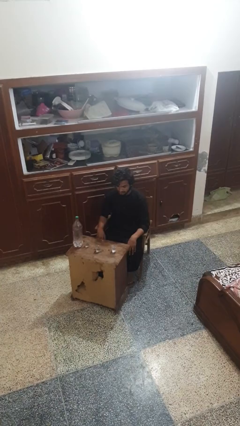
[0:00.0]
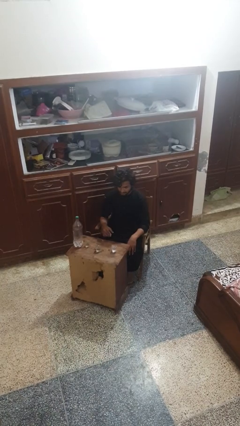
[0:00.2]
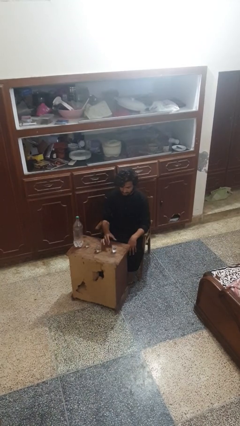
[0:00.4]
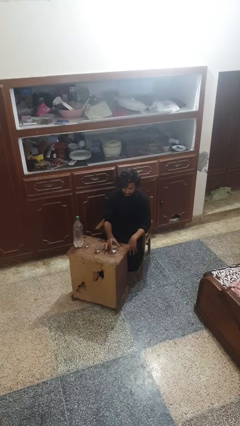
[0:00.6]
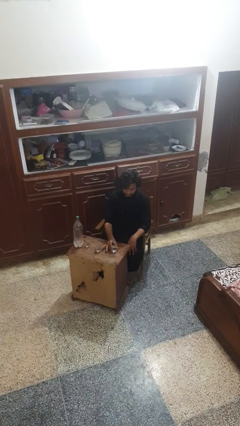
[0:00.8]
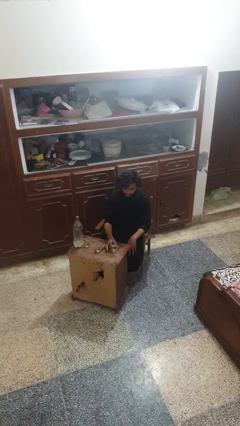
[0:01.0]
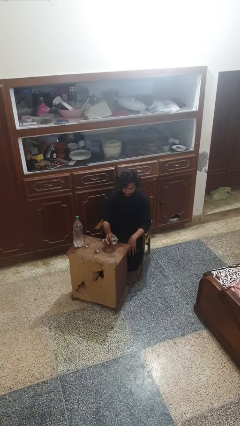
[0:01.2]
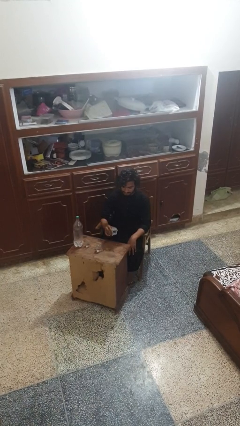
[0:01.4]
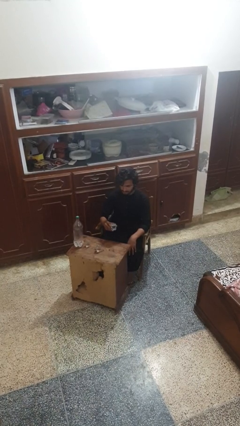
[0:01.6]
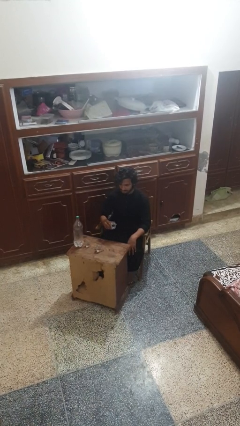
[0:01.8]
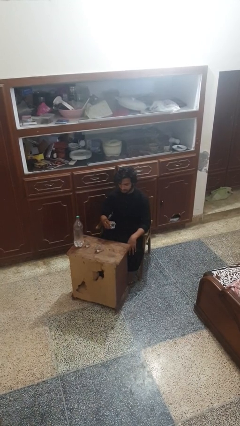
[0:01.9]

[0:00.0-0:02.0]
person picks up object from table

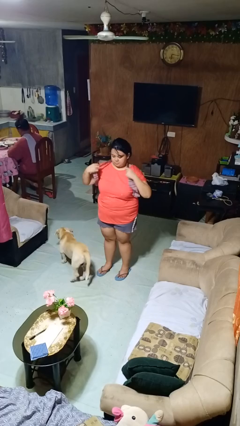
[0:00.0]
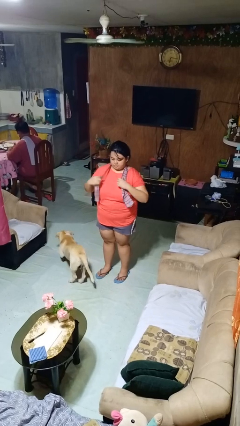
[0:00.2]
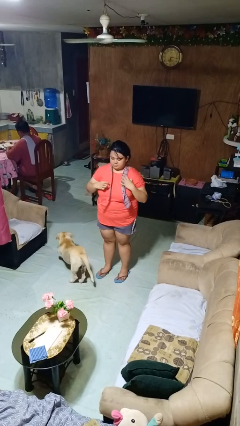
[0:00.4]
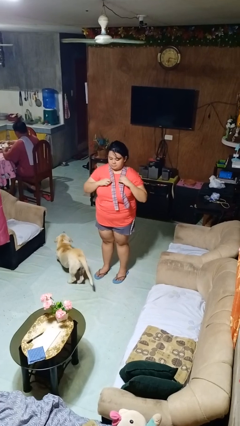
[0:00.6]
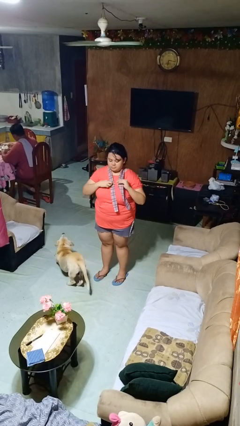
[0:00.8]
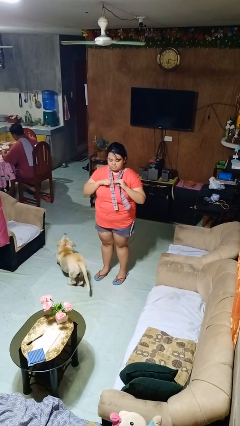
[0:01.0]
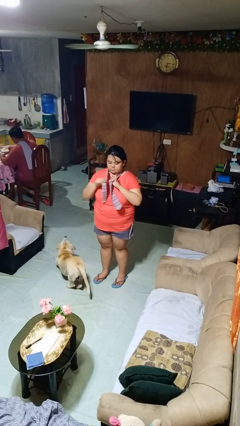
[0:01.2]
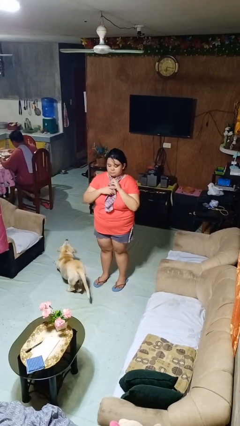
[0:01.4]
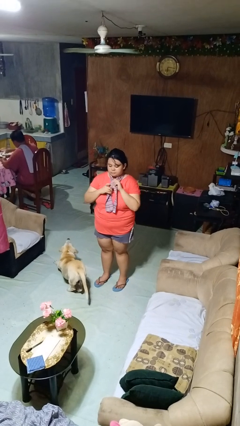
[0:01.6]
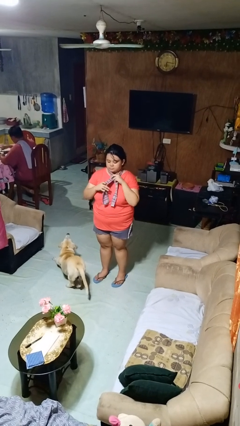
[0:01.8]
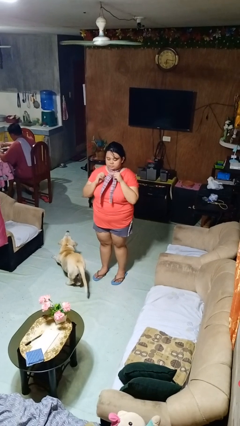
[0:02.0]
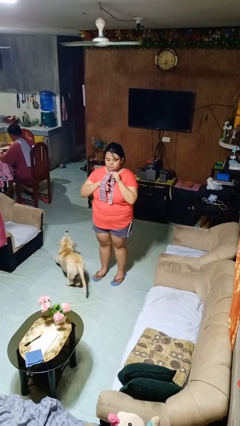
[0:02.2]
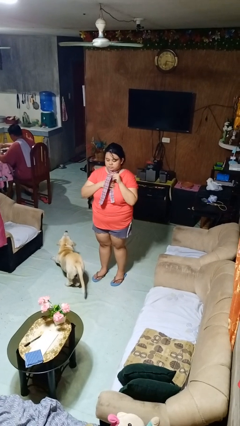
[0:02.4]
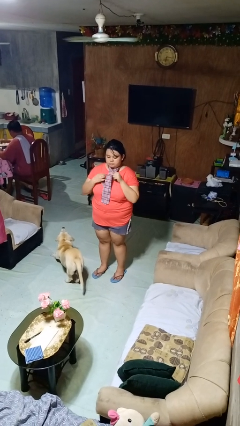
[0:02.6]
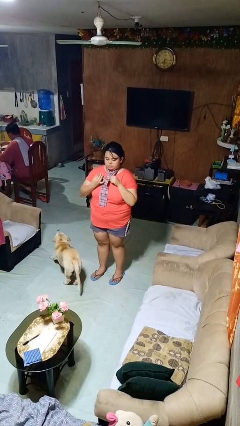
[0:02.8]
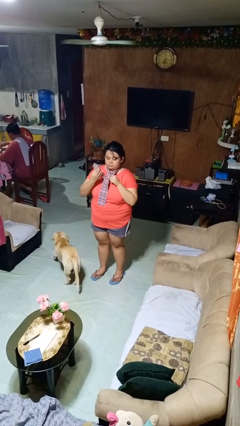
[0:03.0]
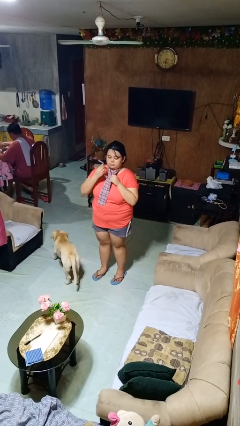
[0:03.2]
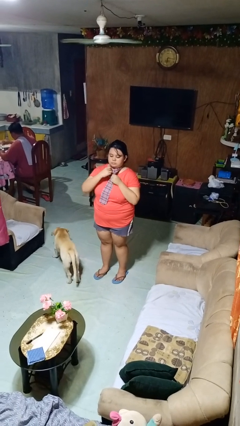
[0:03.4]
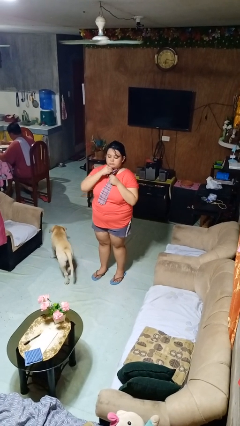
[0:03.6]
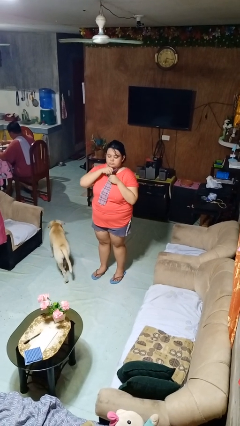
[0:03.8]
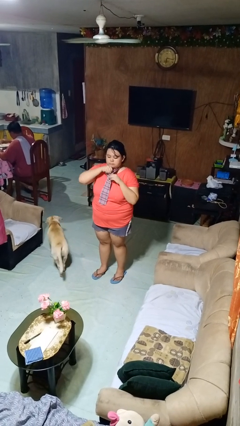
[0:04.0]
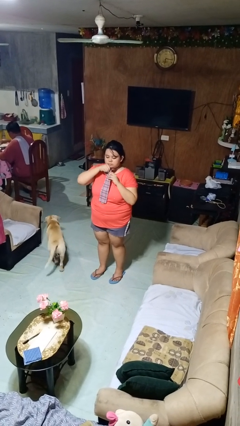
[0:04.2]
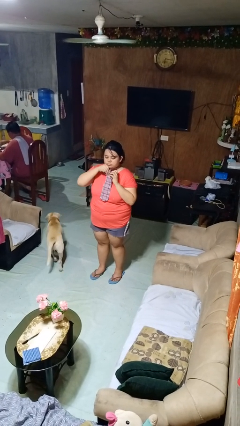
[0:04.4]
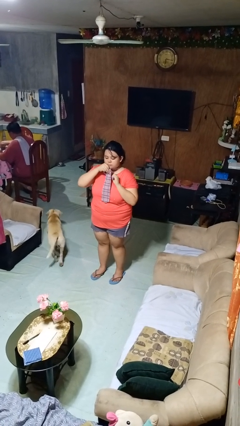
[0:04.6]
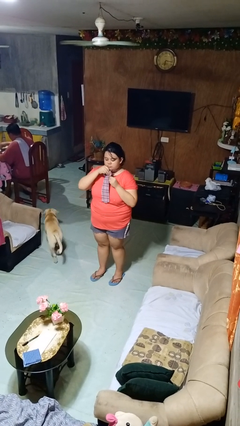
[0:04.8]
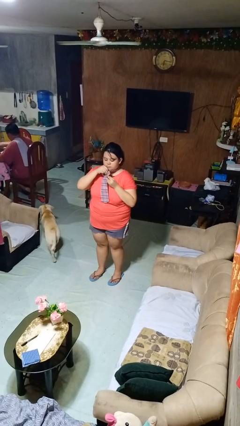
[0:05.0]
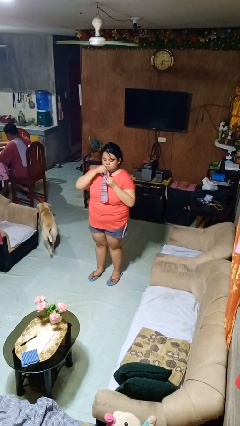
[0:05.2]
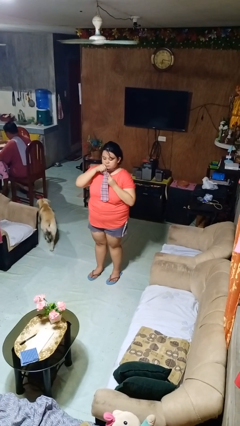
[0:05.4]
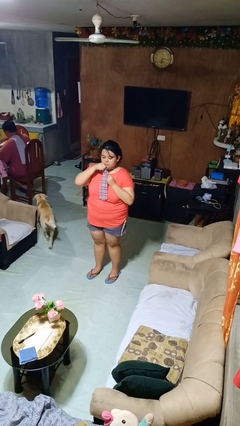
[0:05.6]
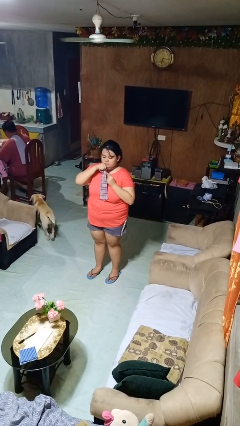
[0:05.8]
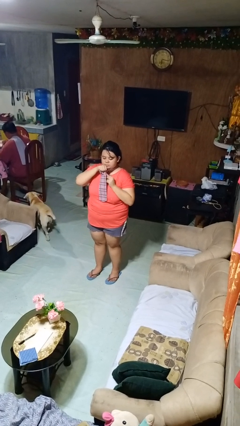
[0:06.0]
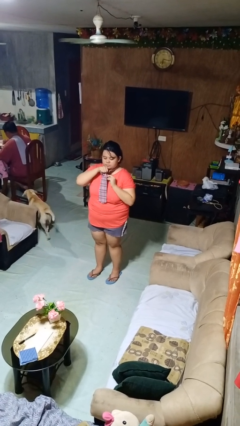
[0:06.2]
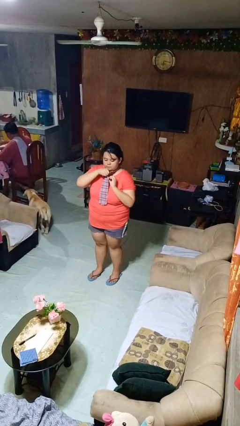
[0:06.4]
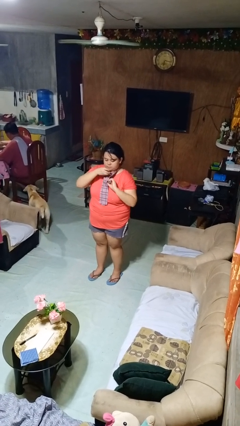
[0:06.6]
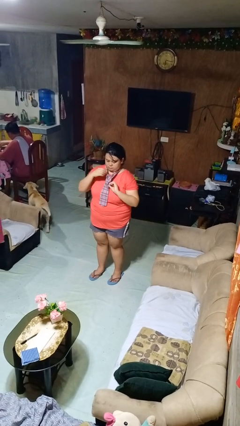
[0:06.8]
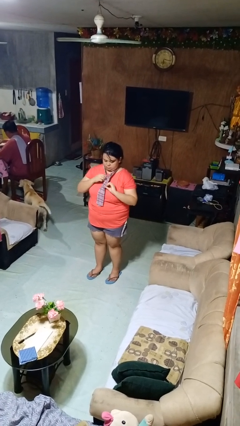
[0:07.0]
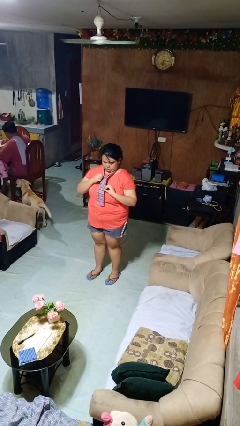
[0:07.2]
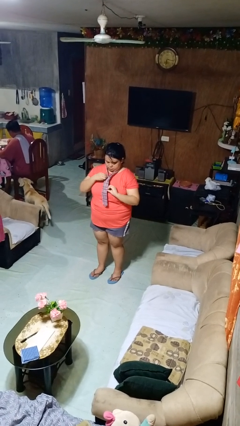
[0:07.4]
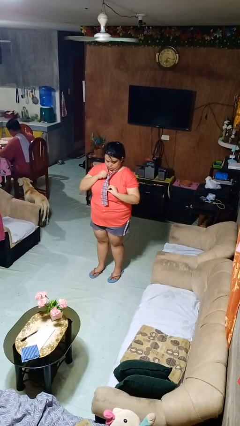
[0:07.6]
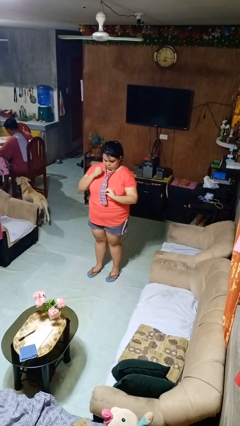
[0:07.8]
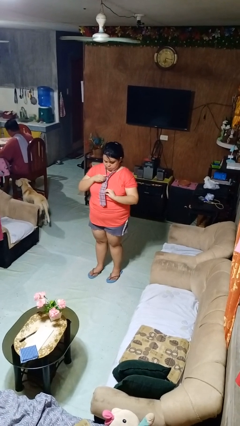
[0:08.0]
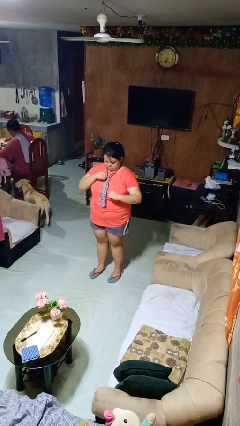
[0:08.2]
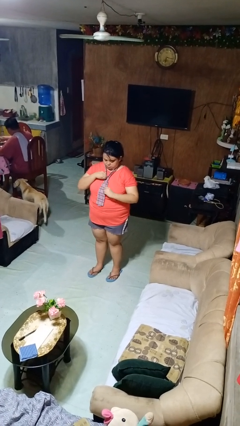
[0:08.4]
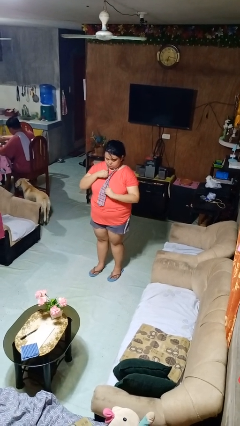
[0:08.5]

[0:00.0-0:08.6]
person puts on necktie

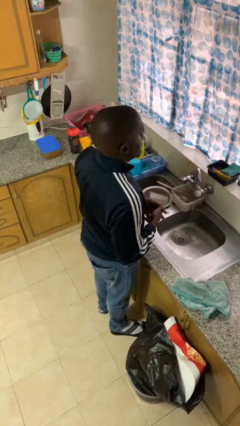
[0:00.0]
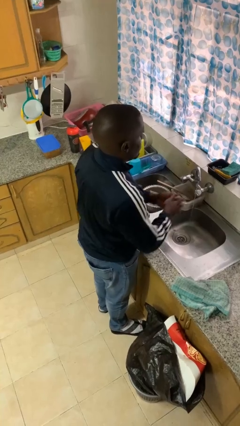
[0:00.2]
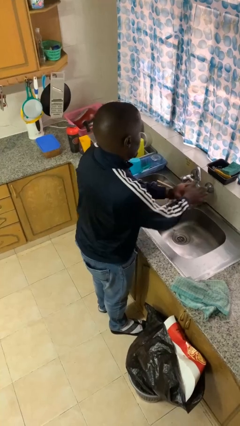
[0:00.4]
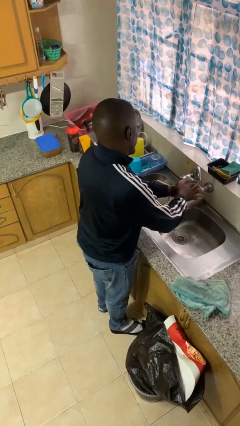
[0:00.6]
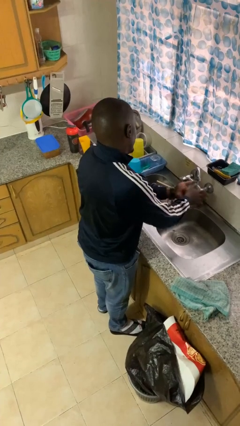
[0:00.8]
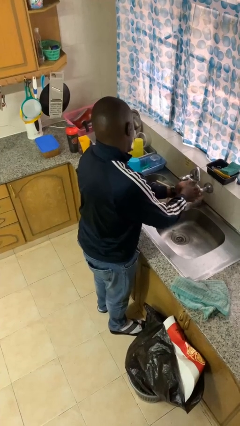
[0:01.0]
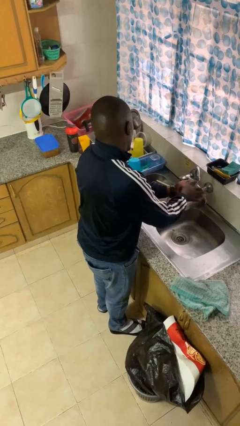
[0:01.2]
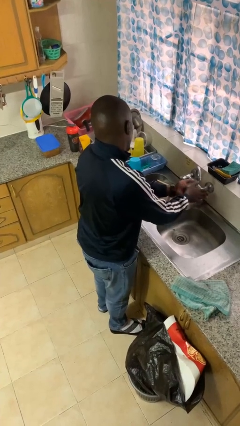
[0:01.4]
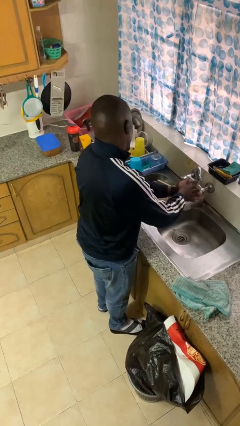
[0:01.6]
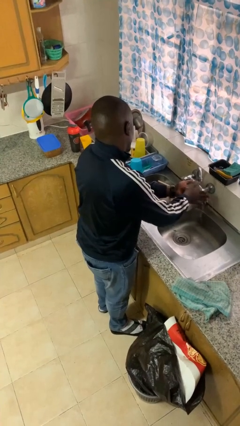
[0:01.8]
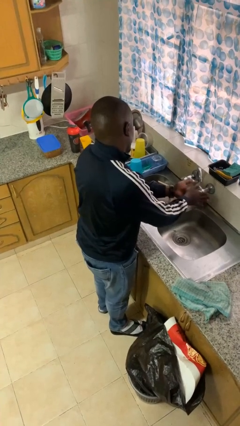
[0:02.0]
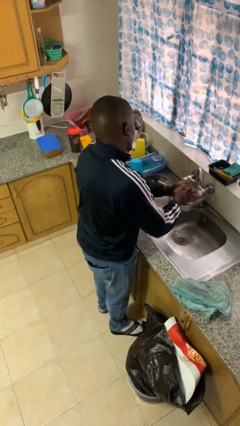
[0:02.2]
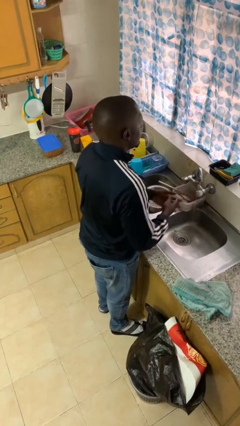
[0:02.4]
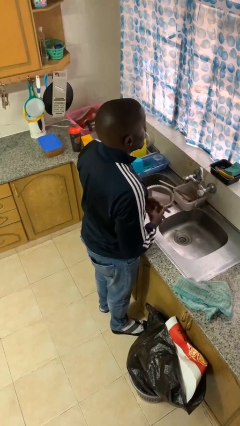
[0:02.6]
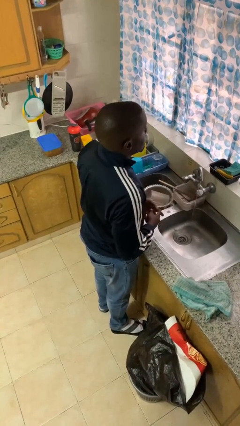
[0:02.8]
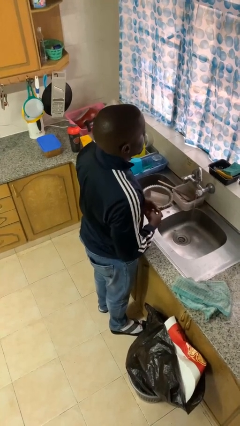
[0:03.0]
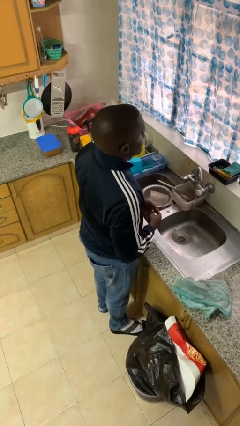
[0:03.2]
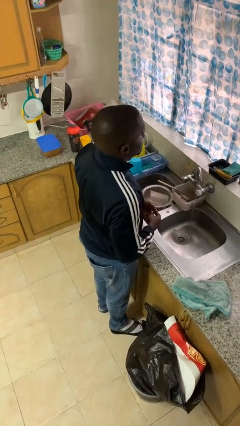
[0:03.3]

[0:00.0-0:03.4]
person washes hands

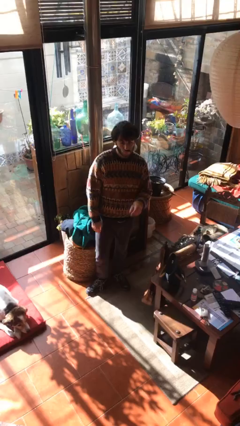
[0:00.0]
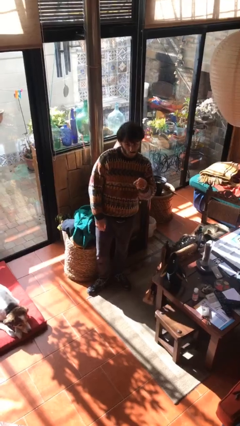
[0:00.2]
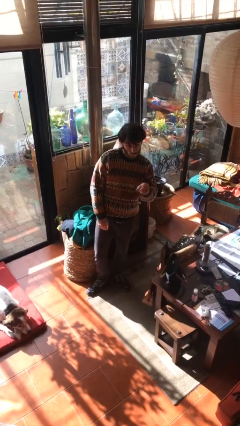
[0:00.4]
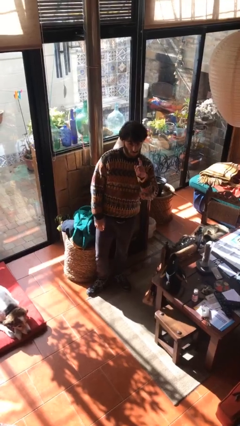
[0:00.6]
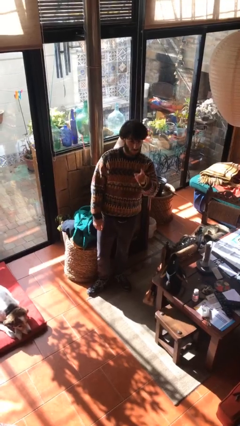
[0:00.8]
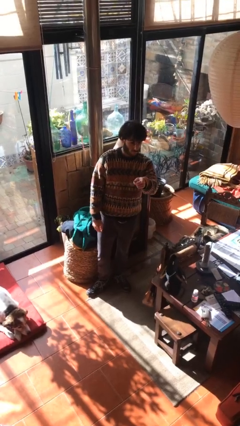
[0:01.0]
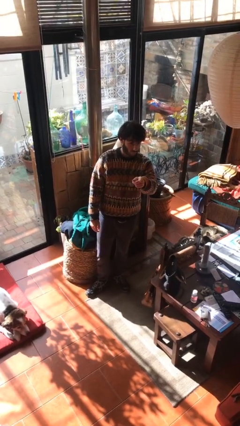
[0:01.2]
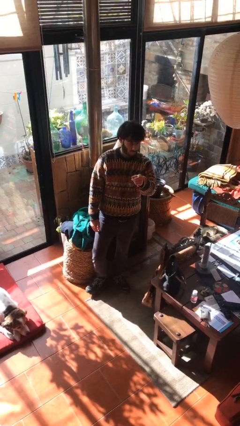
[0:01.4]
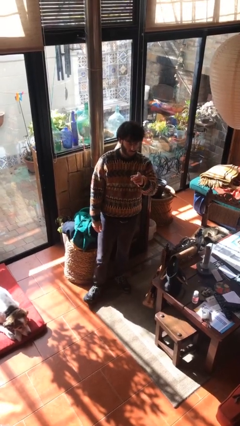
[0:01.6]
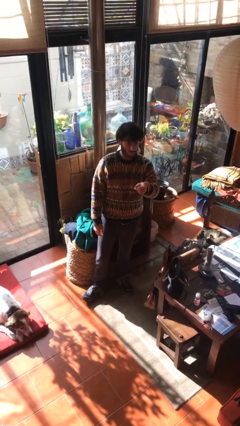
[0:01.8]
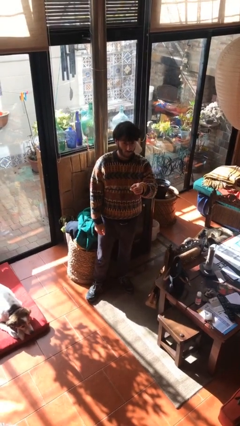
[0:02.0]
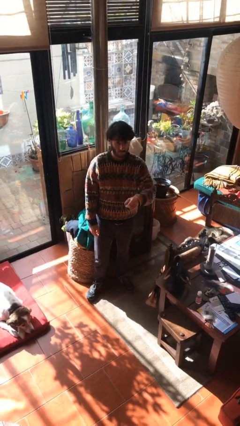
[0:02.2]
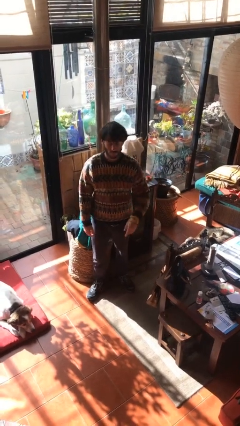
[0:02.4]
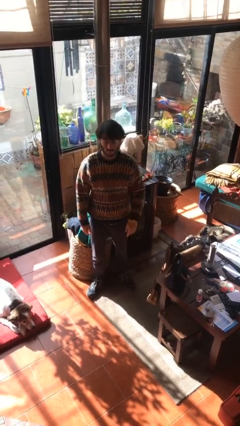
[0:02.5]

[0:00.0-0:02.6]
person points at person

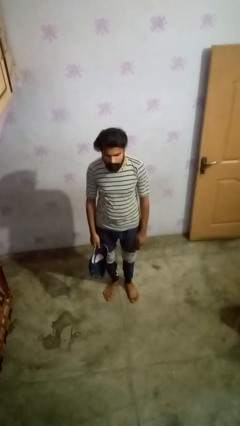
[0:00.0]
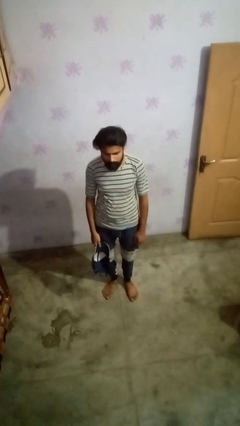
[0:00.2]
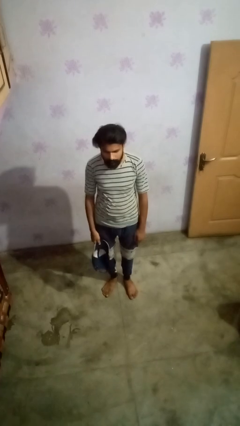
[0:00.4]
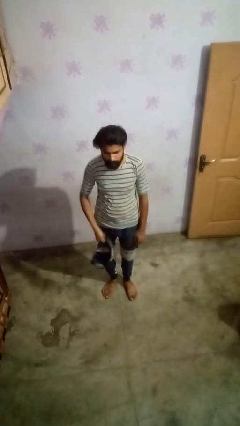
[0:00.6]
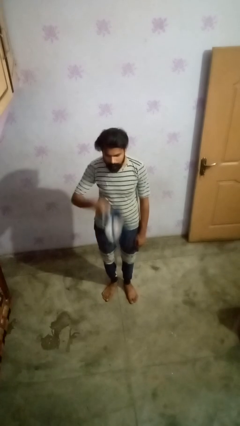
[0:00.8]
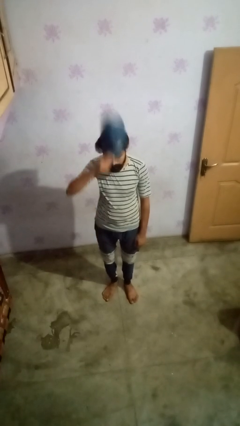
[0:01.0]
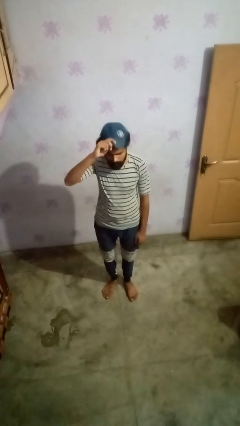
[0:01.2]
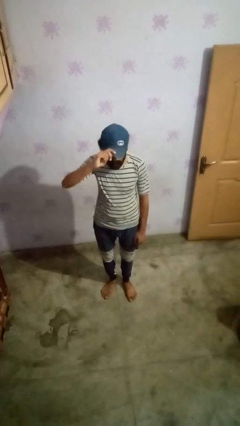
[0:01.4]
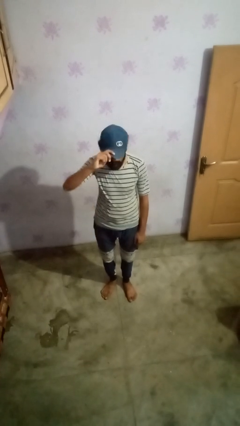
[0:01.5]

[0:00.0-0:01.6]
person puts on hat
